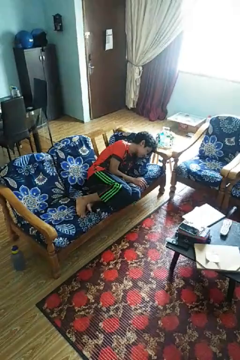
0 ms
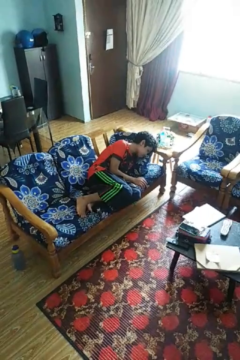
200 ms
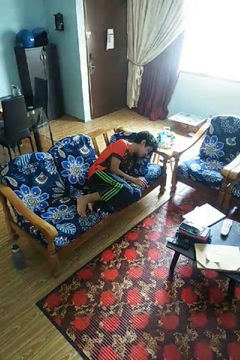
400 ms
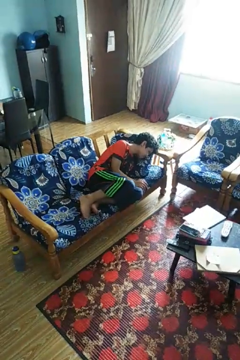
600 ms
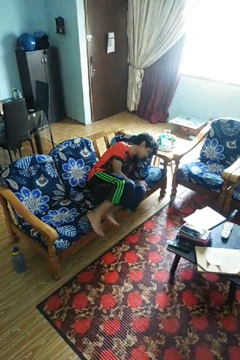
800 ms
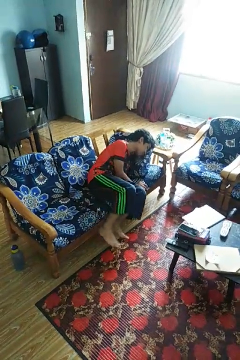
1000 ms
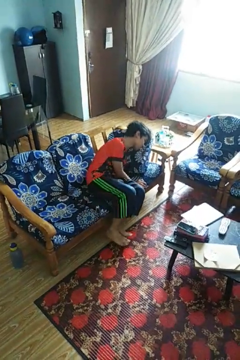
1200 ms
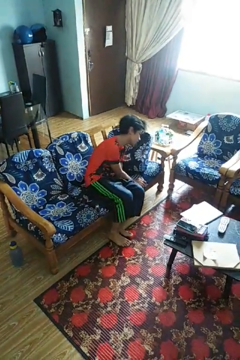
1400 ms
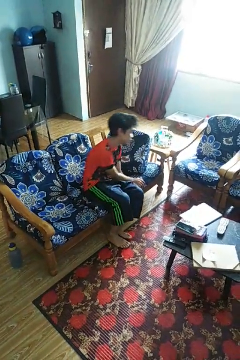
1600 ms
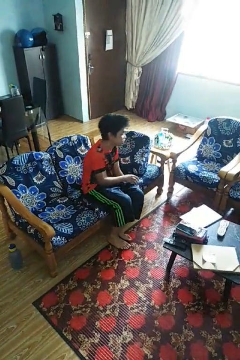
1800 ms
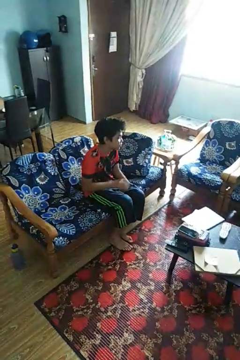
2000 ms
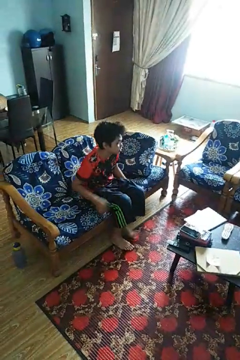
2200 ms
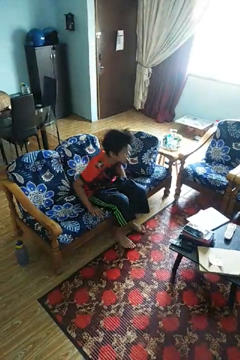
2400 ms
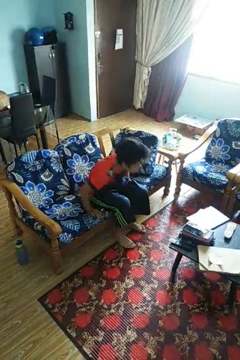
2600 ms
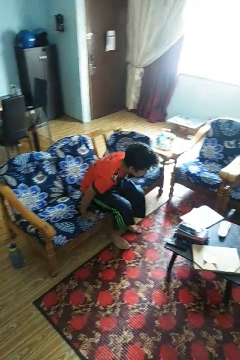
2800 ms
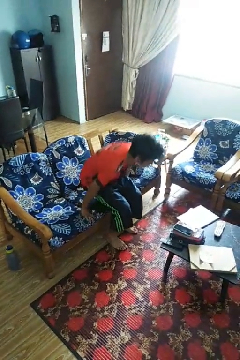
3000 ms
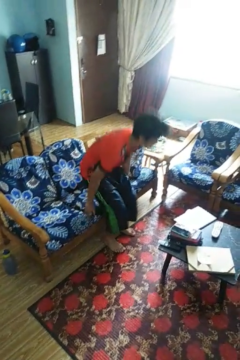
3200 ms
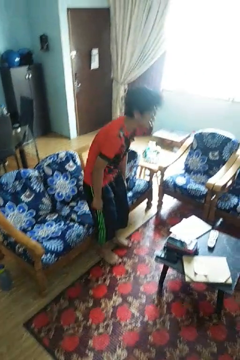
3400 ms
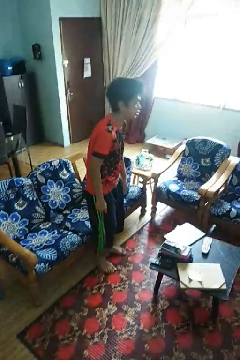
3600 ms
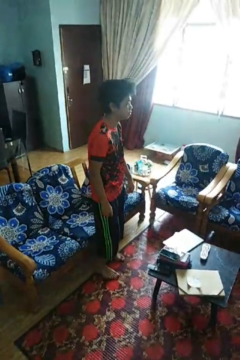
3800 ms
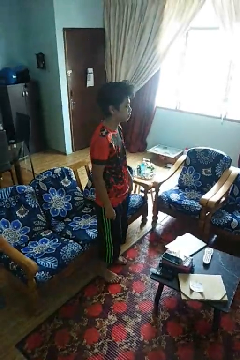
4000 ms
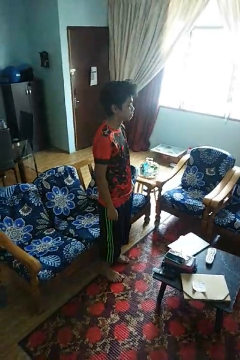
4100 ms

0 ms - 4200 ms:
person stands up

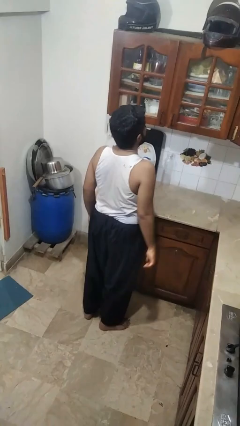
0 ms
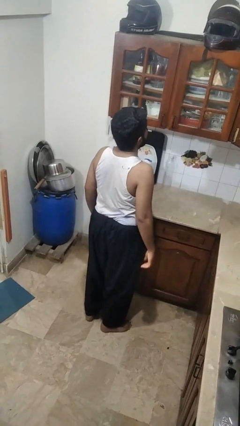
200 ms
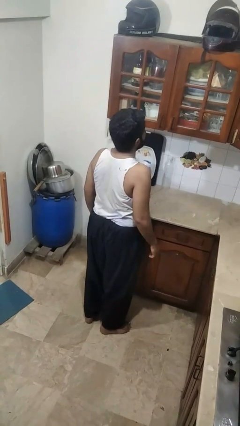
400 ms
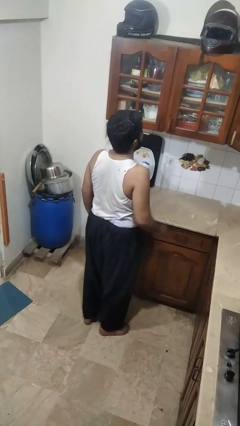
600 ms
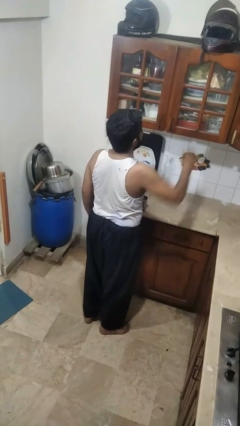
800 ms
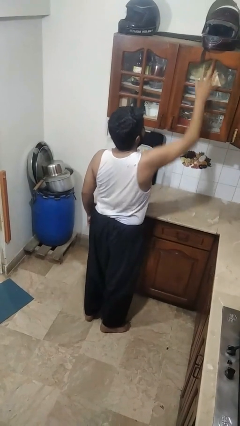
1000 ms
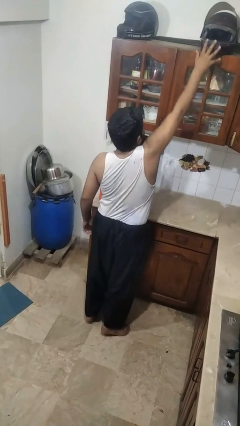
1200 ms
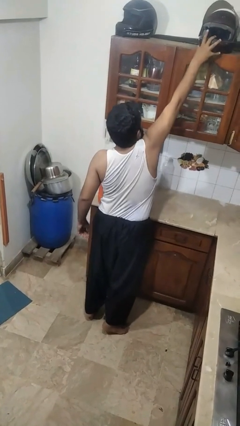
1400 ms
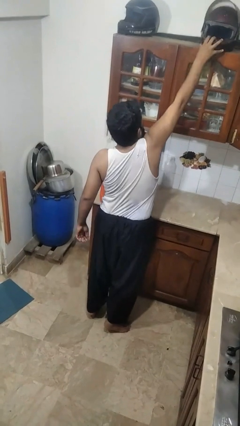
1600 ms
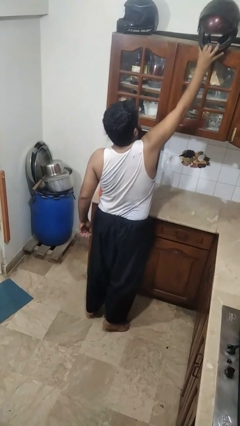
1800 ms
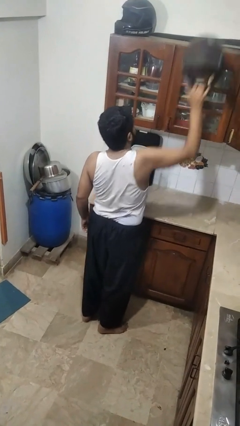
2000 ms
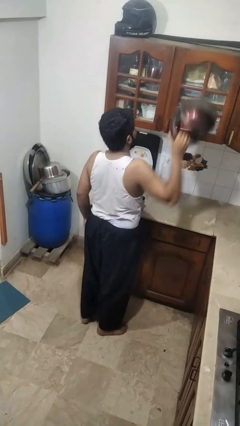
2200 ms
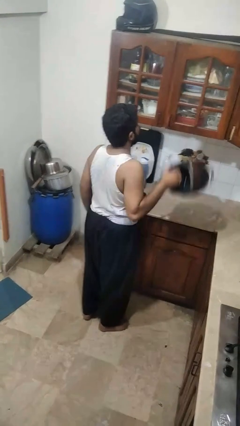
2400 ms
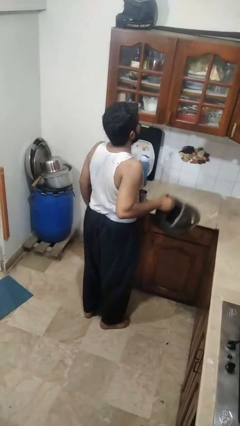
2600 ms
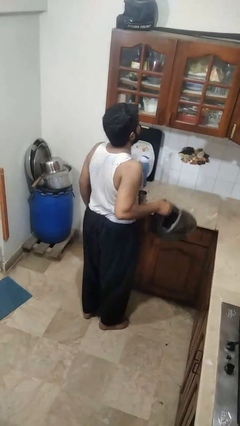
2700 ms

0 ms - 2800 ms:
person picks up object from shelf

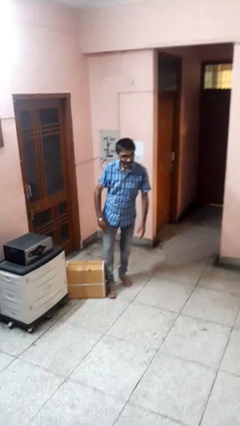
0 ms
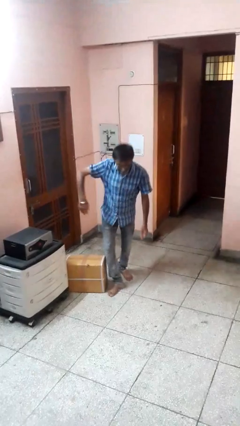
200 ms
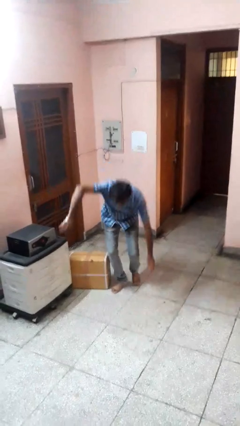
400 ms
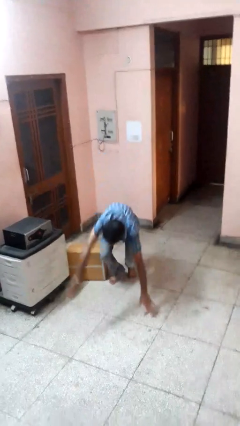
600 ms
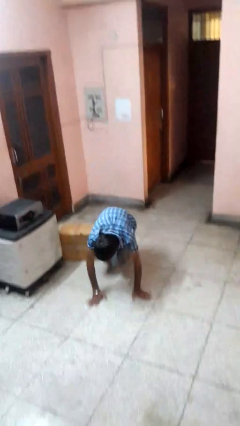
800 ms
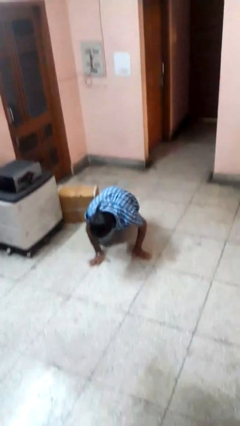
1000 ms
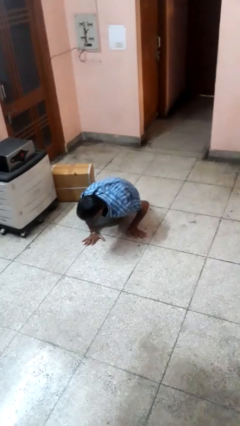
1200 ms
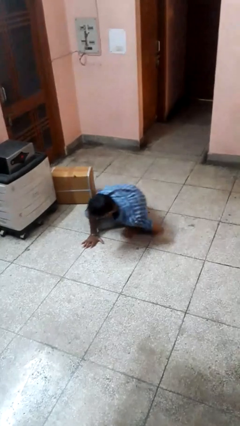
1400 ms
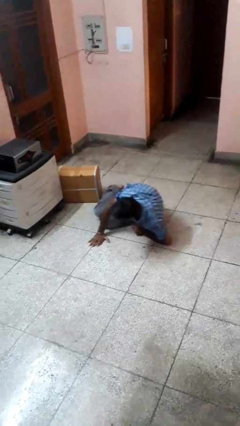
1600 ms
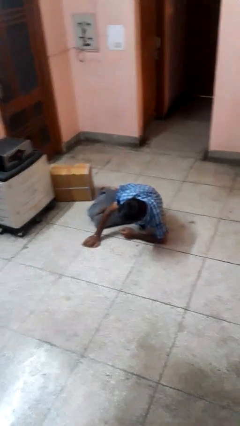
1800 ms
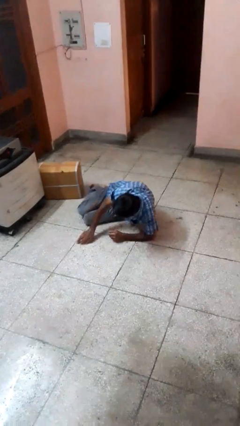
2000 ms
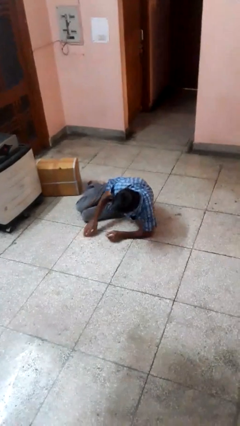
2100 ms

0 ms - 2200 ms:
person trips on object on floor

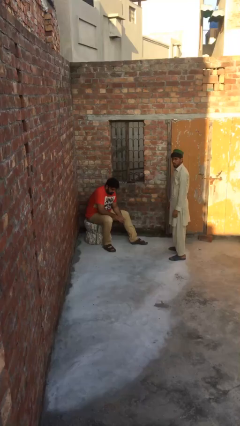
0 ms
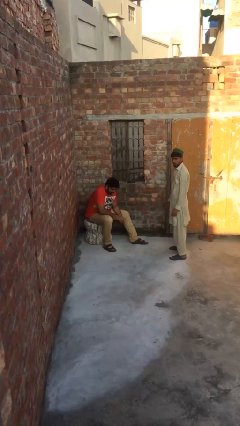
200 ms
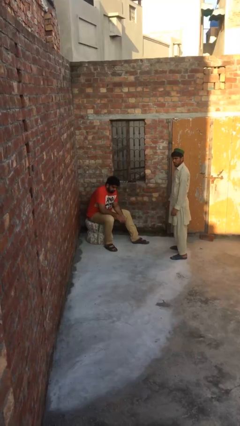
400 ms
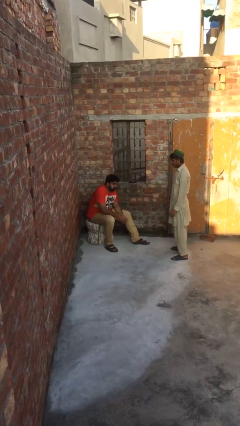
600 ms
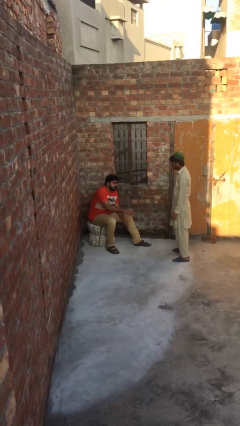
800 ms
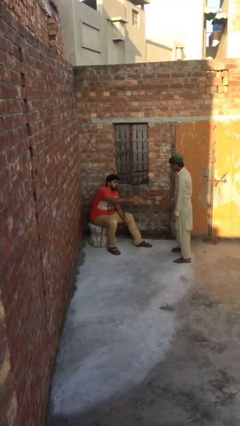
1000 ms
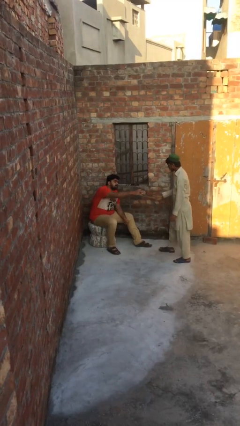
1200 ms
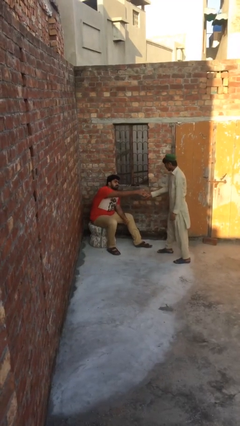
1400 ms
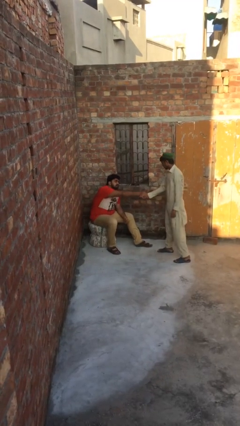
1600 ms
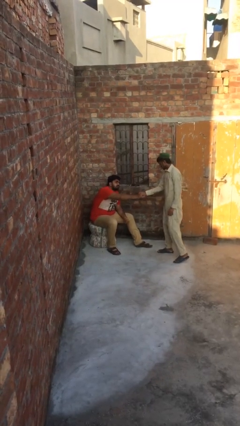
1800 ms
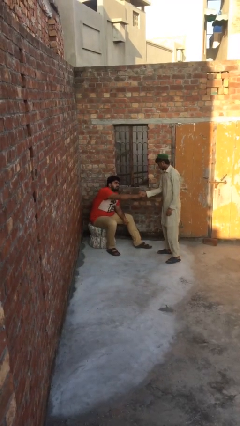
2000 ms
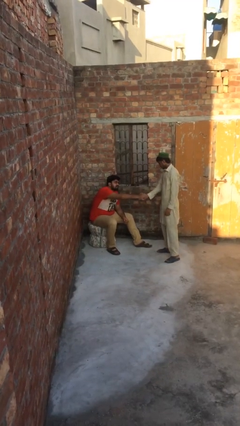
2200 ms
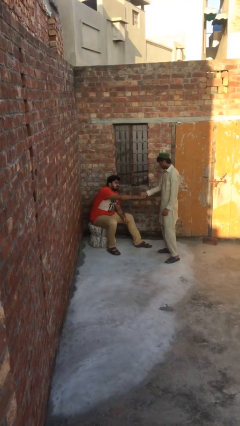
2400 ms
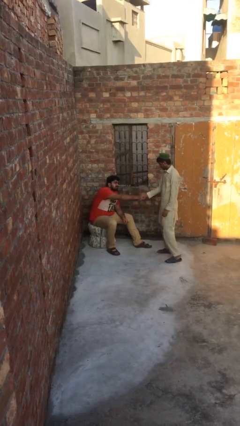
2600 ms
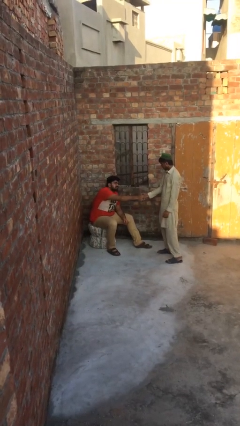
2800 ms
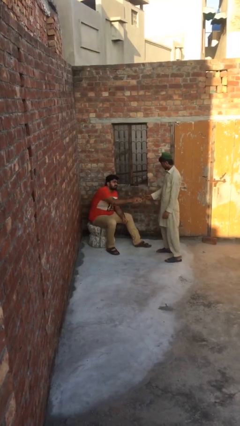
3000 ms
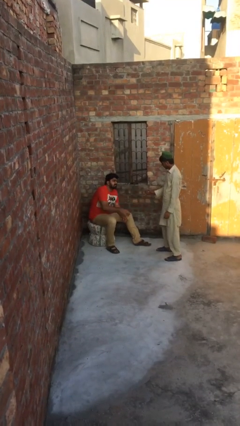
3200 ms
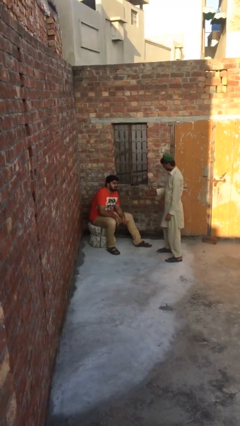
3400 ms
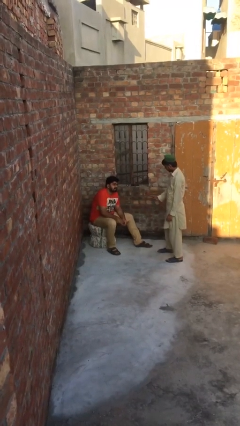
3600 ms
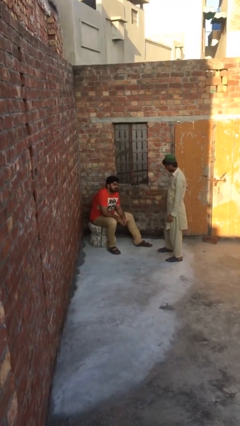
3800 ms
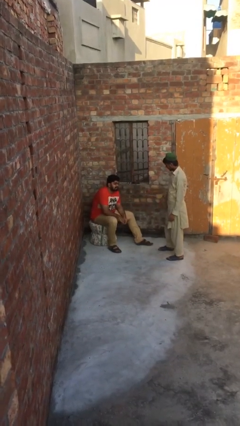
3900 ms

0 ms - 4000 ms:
person shakes hand

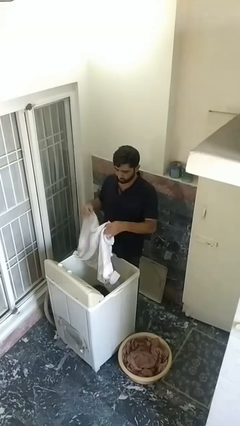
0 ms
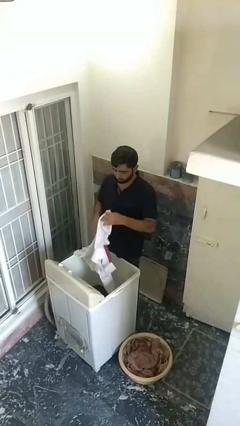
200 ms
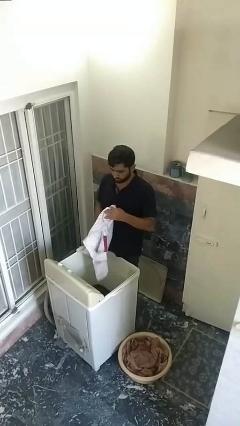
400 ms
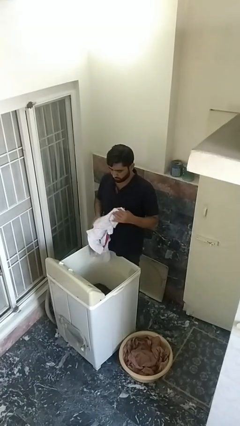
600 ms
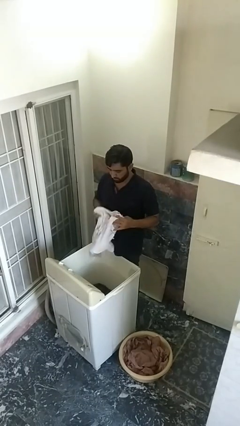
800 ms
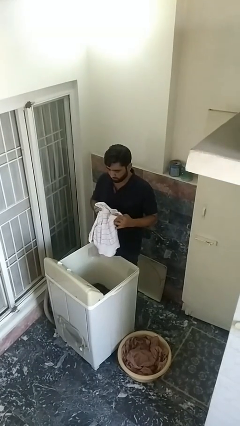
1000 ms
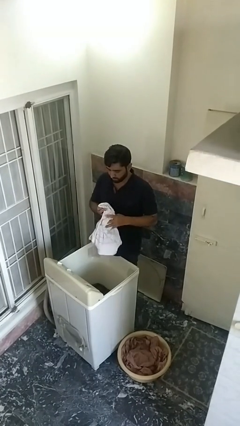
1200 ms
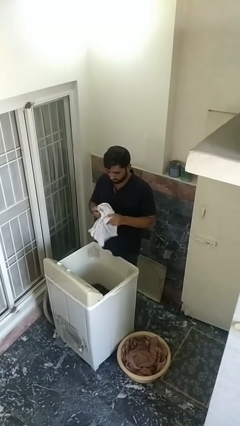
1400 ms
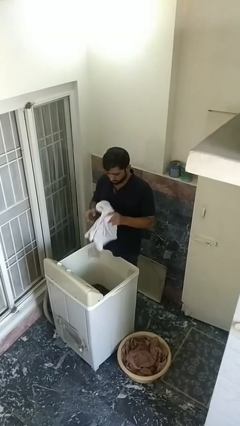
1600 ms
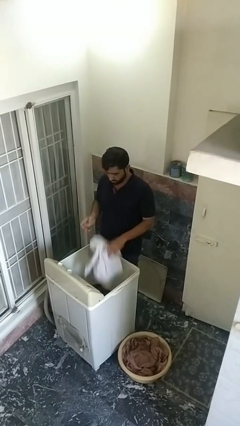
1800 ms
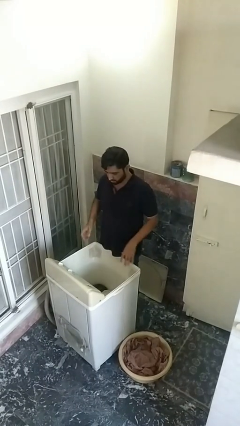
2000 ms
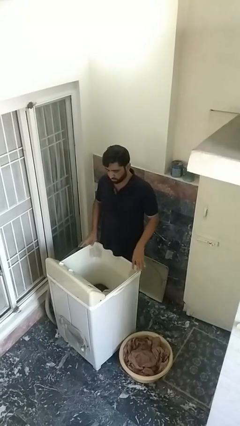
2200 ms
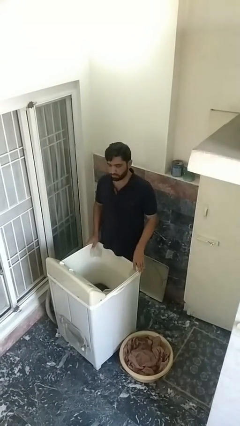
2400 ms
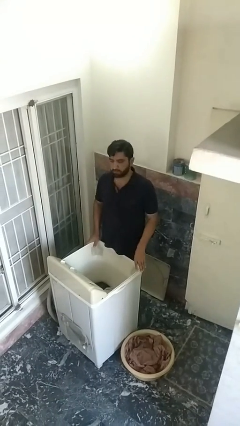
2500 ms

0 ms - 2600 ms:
person loads clotheswasher

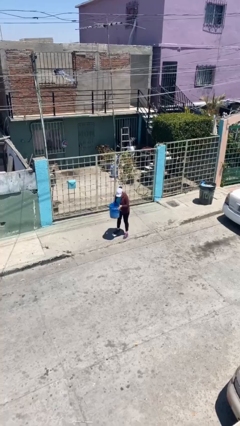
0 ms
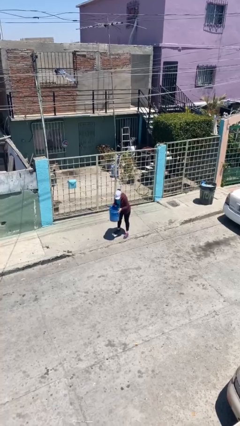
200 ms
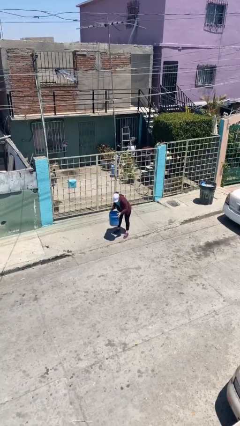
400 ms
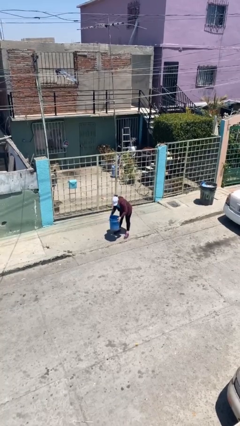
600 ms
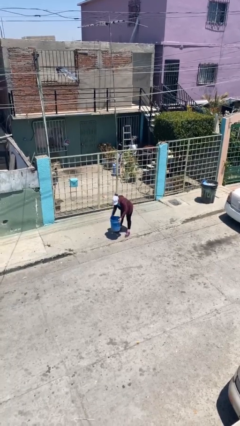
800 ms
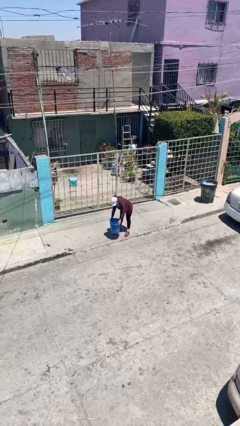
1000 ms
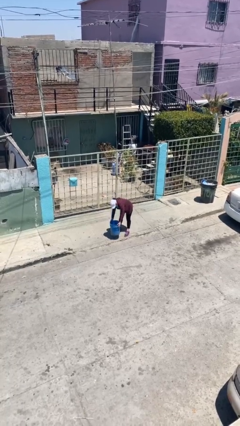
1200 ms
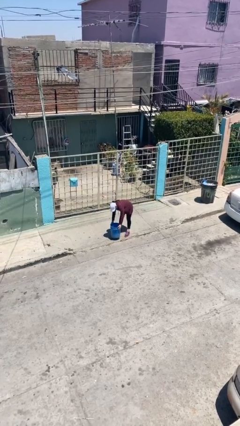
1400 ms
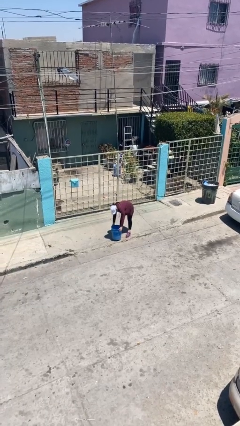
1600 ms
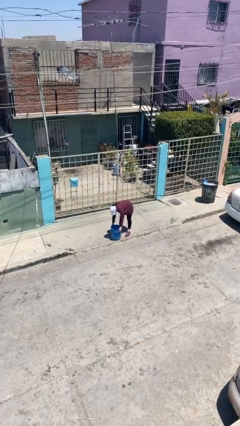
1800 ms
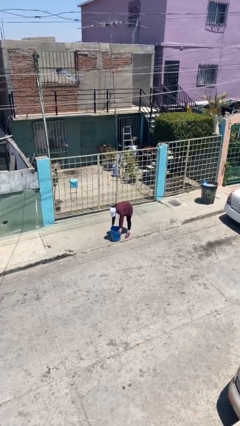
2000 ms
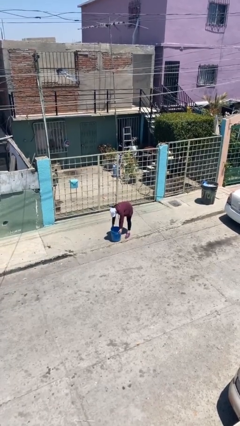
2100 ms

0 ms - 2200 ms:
person puts down object on floor

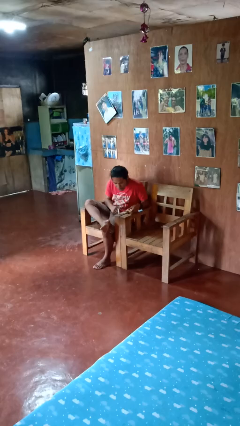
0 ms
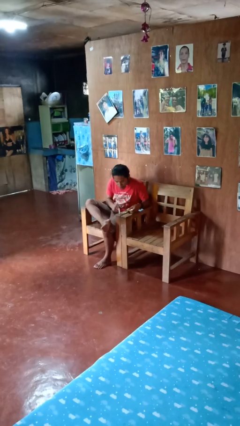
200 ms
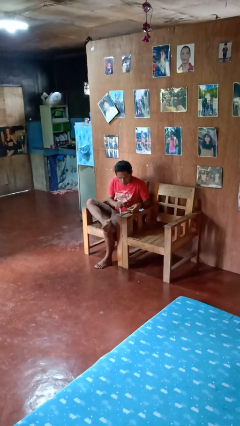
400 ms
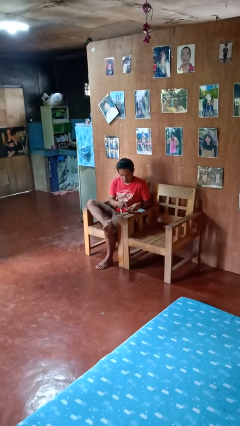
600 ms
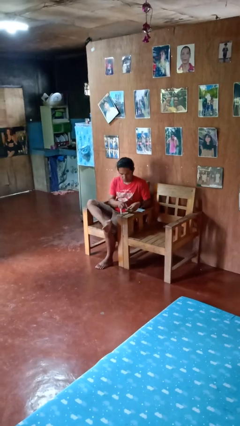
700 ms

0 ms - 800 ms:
person extinguishes candle
